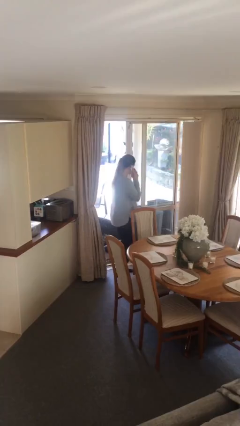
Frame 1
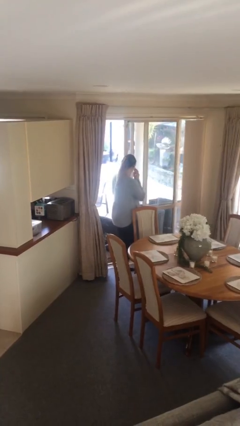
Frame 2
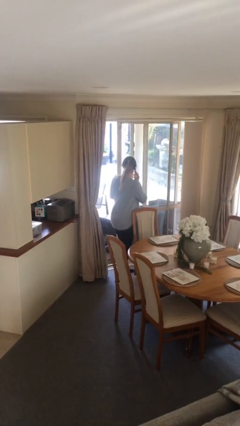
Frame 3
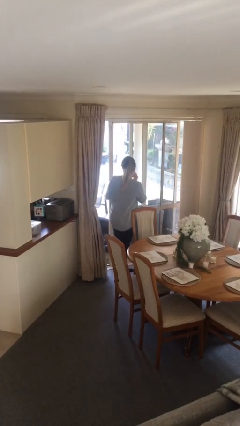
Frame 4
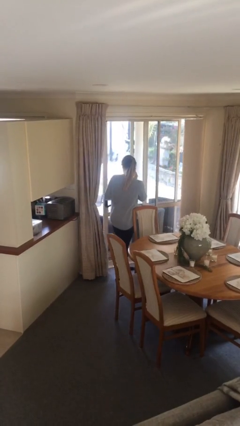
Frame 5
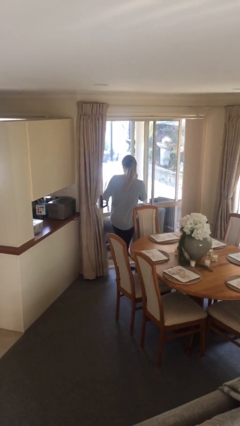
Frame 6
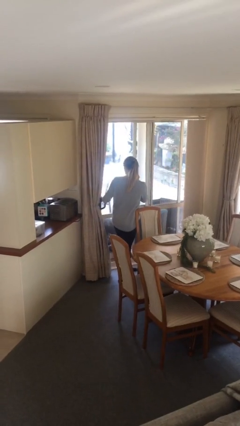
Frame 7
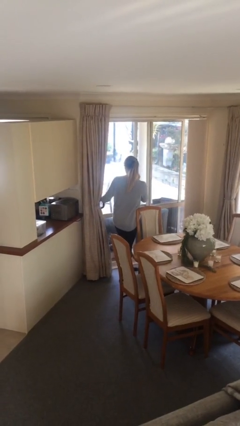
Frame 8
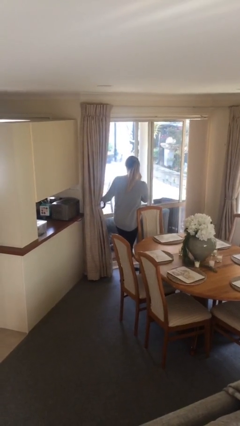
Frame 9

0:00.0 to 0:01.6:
person closes facility door

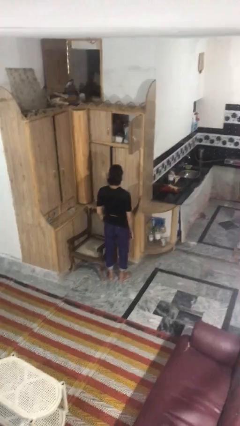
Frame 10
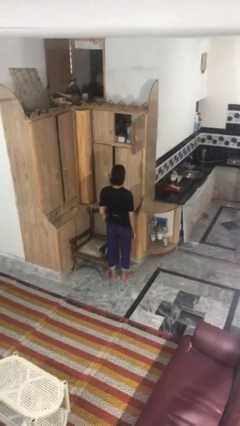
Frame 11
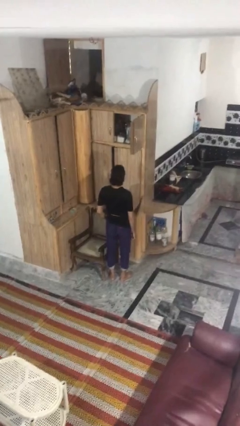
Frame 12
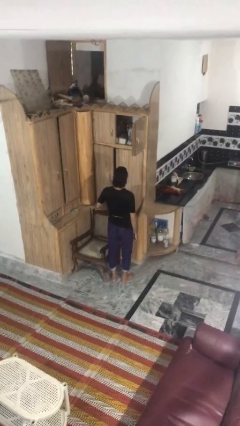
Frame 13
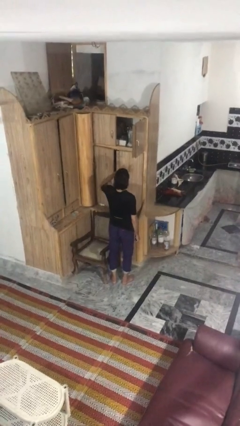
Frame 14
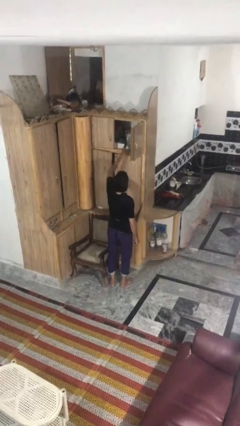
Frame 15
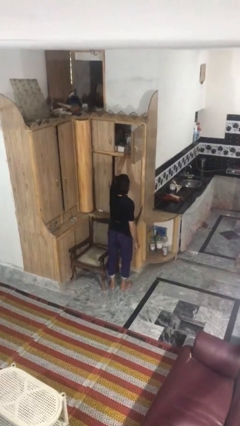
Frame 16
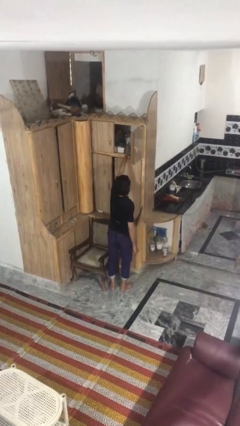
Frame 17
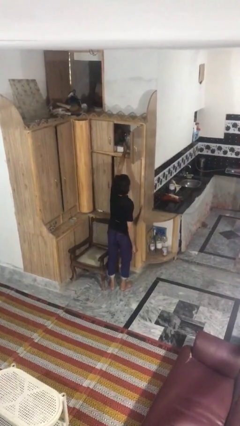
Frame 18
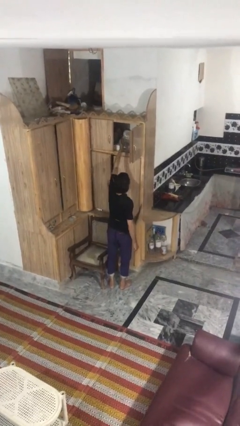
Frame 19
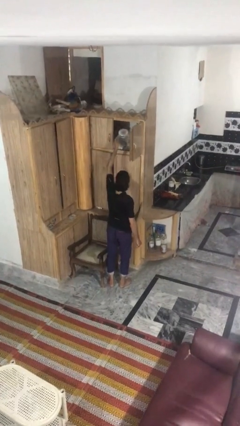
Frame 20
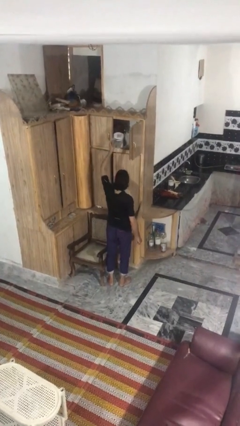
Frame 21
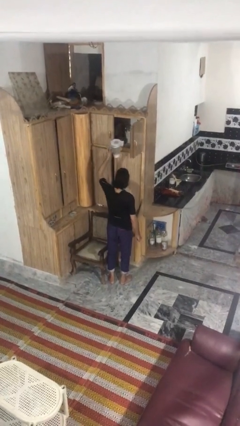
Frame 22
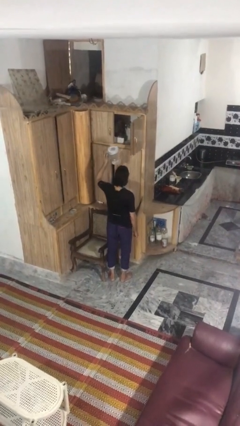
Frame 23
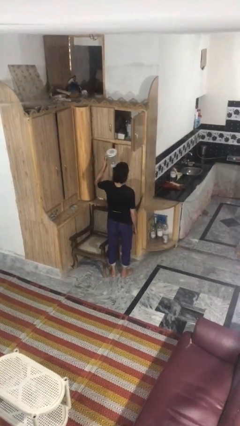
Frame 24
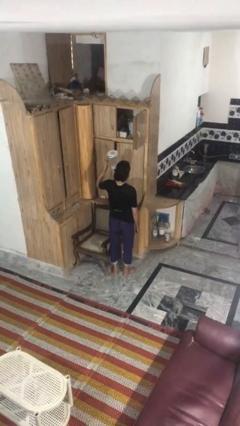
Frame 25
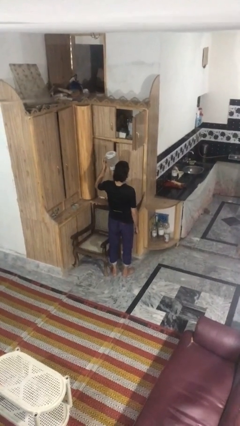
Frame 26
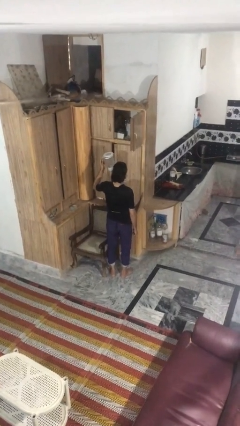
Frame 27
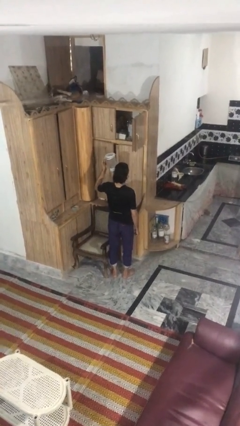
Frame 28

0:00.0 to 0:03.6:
person picks up object from shelf

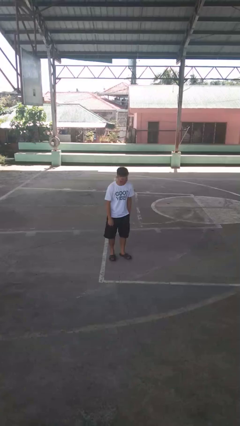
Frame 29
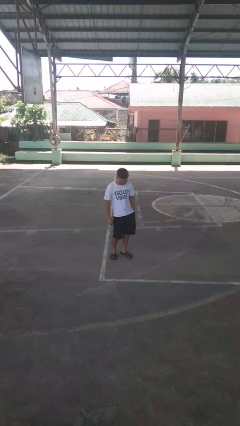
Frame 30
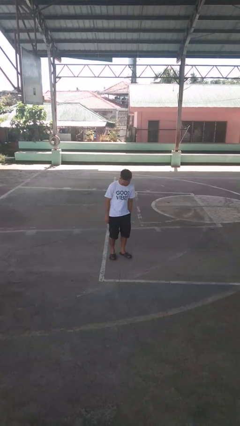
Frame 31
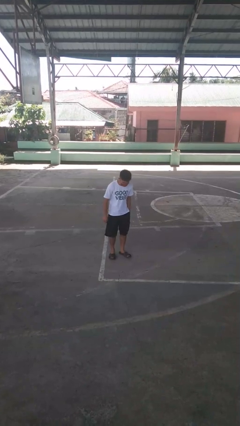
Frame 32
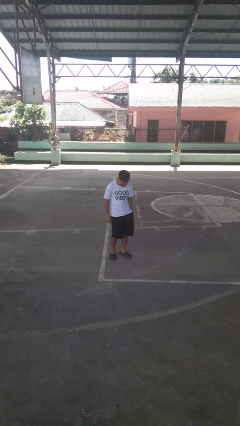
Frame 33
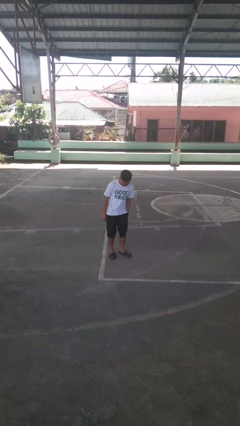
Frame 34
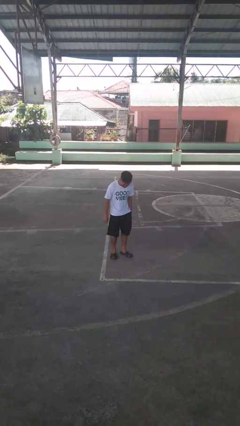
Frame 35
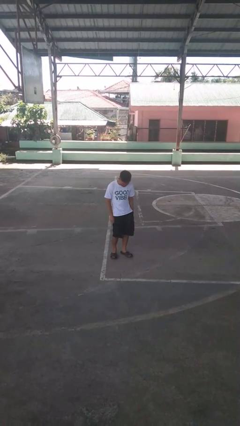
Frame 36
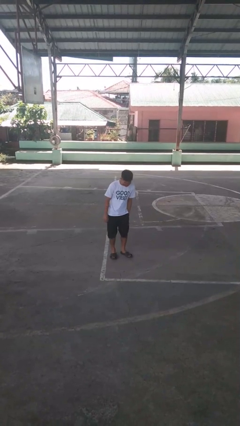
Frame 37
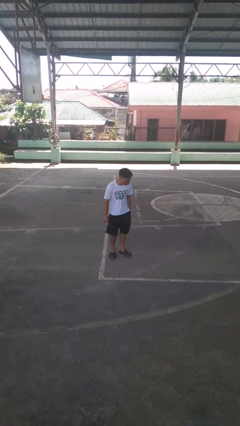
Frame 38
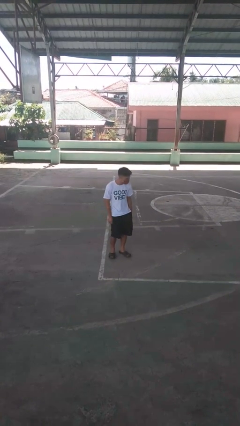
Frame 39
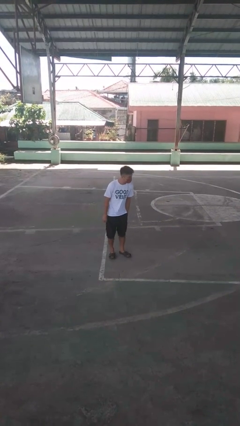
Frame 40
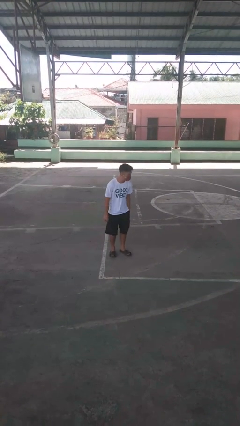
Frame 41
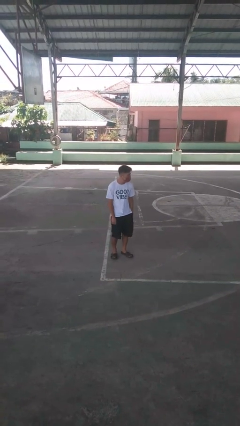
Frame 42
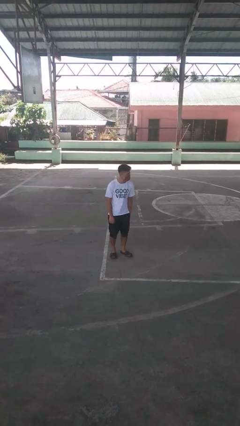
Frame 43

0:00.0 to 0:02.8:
person wiggles hips

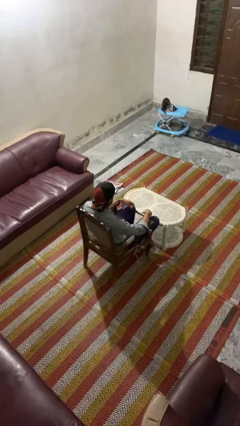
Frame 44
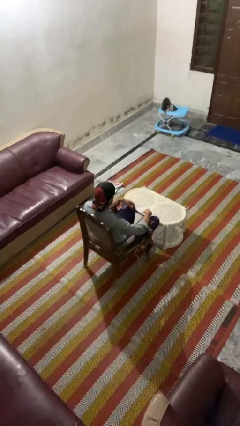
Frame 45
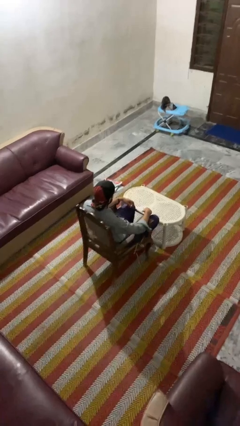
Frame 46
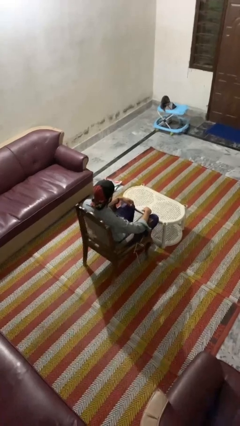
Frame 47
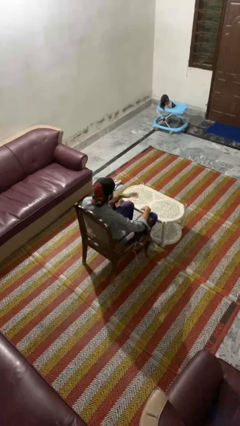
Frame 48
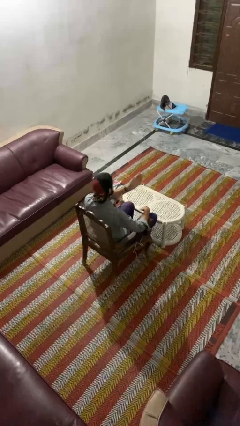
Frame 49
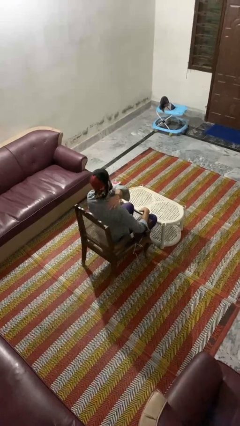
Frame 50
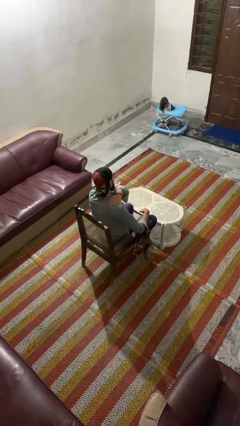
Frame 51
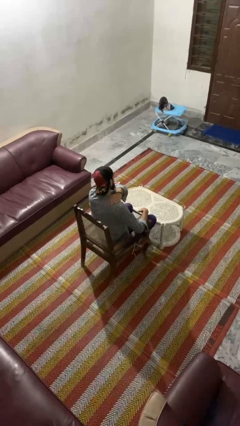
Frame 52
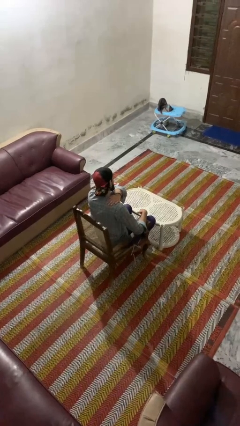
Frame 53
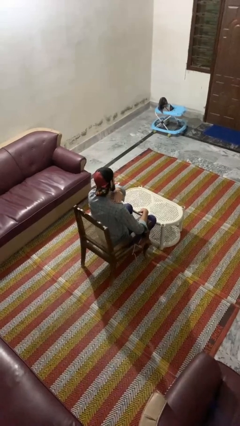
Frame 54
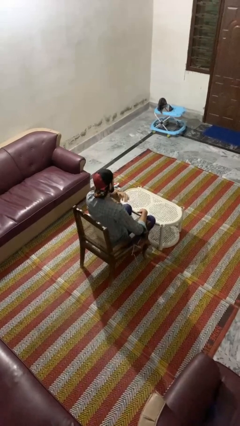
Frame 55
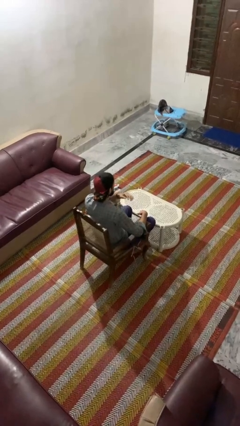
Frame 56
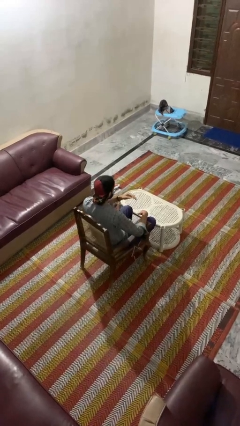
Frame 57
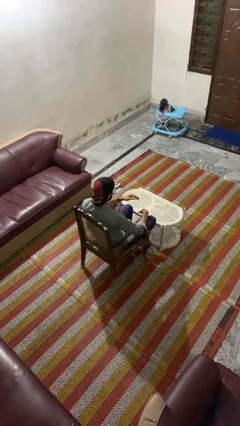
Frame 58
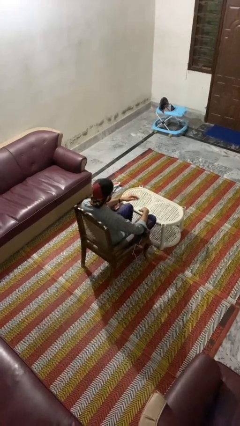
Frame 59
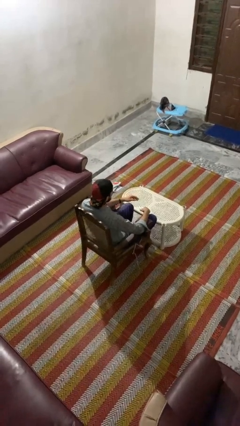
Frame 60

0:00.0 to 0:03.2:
person swats bug

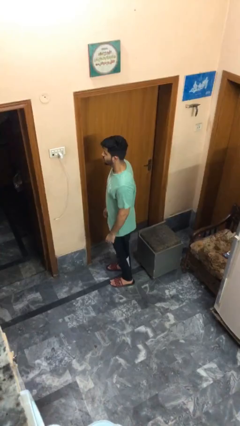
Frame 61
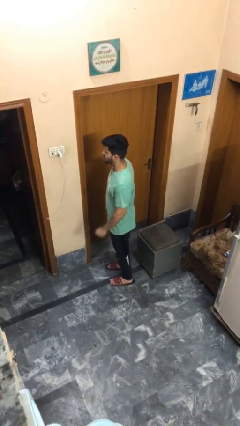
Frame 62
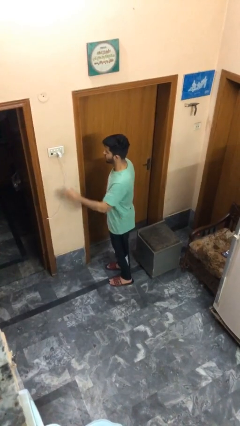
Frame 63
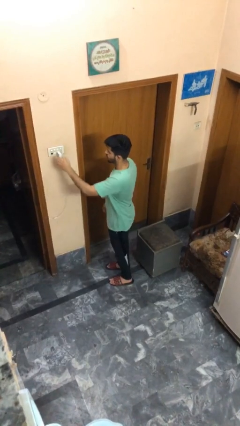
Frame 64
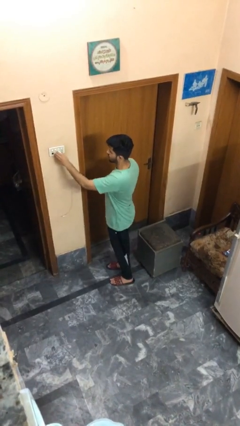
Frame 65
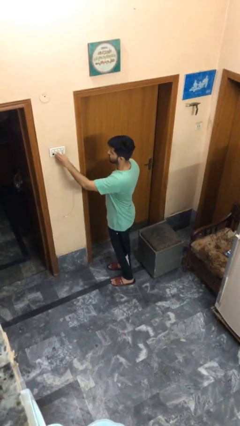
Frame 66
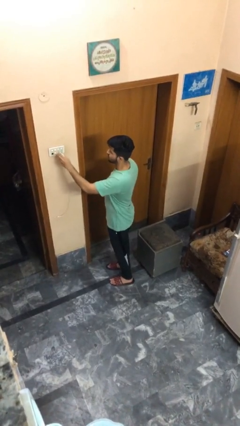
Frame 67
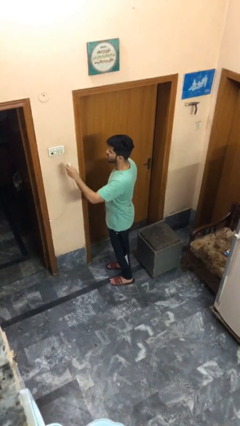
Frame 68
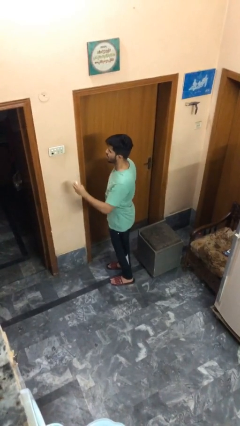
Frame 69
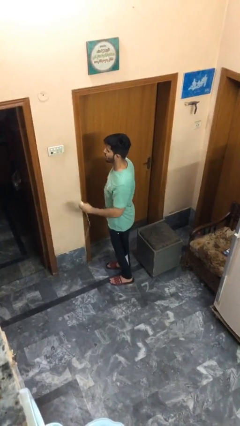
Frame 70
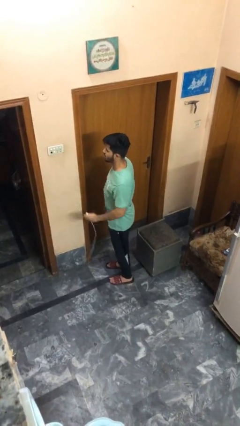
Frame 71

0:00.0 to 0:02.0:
person unplugs from electrical socket

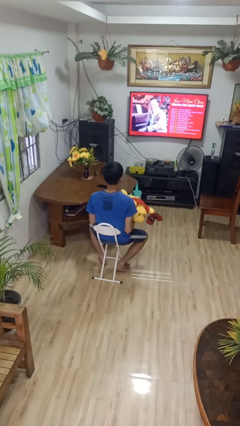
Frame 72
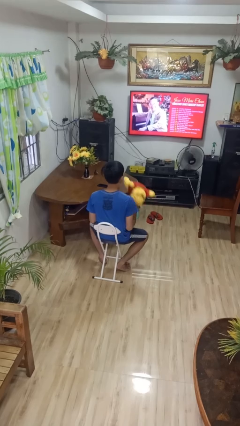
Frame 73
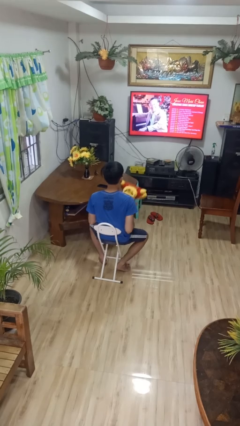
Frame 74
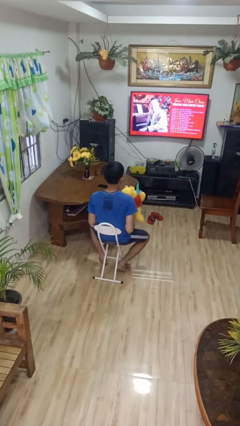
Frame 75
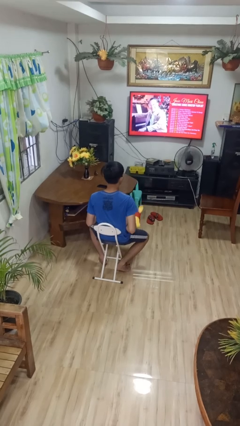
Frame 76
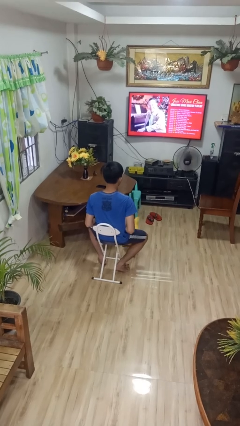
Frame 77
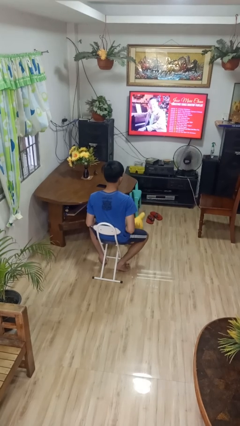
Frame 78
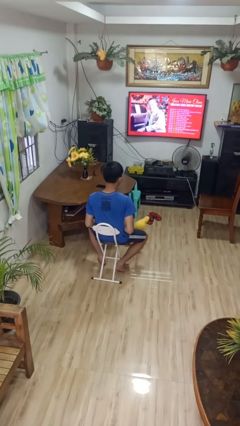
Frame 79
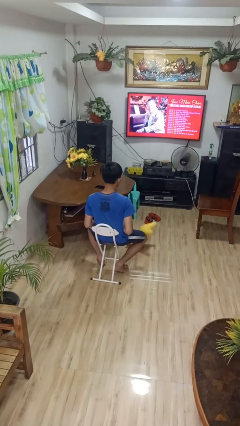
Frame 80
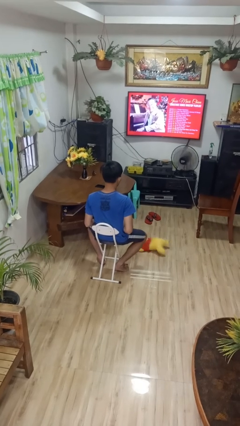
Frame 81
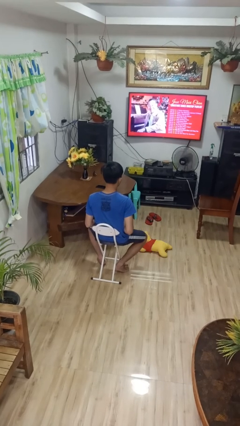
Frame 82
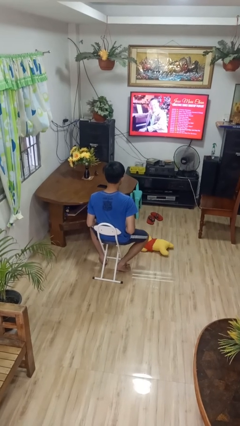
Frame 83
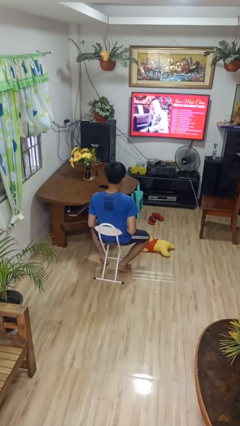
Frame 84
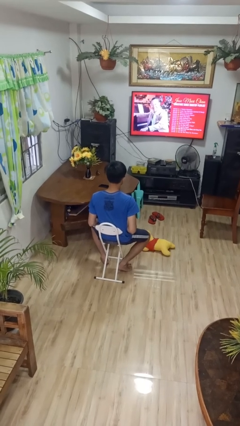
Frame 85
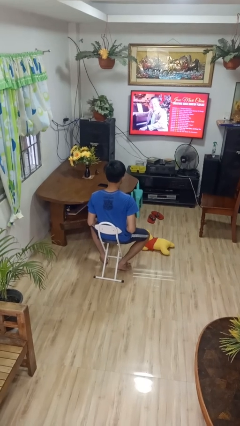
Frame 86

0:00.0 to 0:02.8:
person drops object

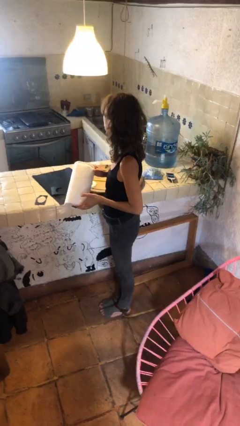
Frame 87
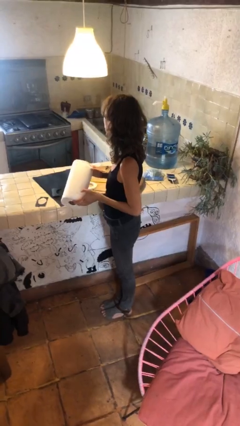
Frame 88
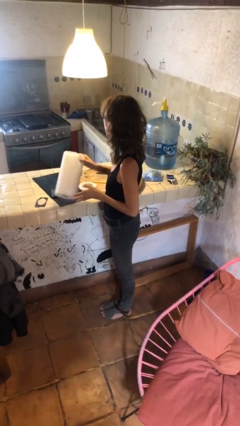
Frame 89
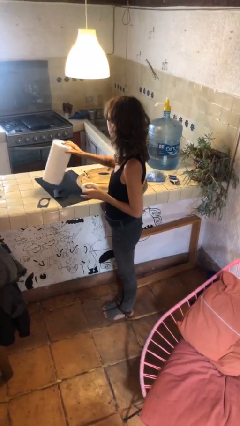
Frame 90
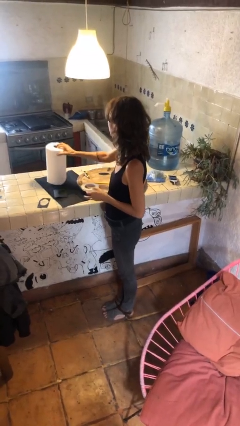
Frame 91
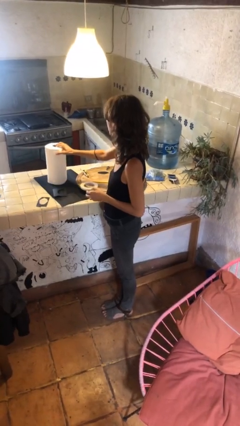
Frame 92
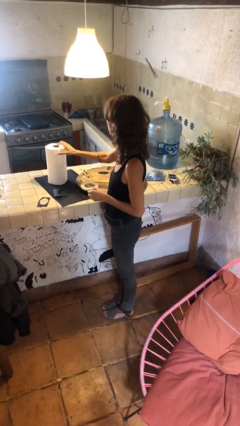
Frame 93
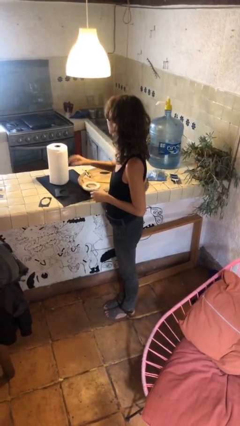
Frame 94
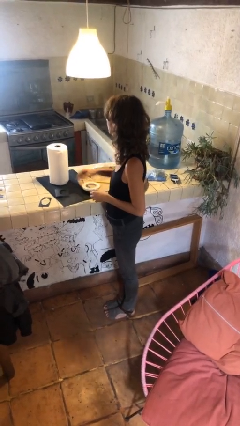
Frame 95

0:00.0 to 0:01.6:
person puts down object on countertop
